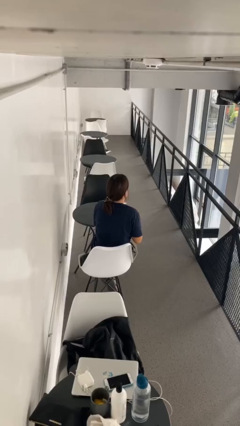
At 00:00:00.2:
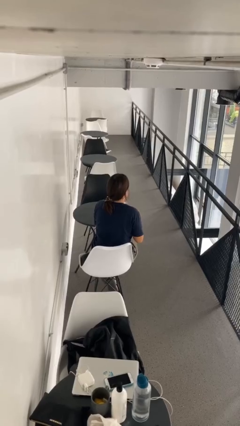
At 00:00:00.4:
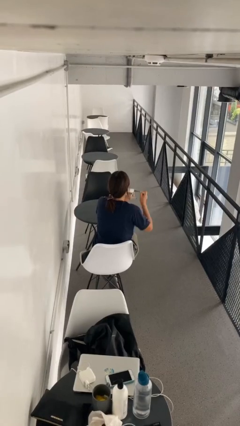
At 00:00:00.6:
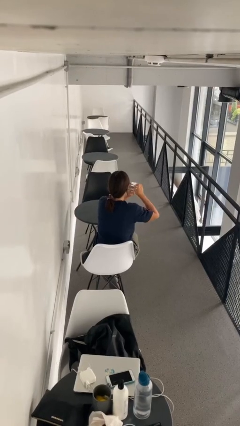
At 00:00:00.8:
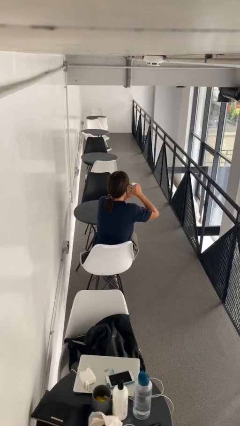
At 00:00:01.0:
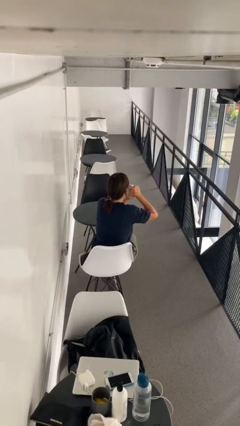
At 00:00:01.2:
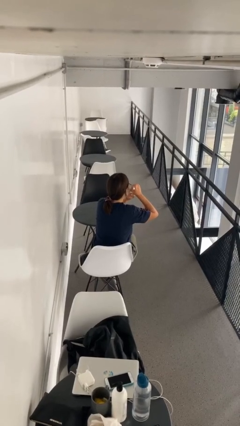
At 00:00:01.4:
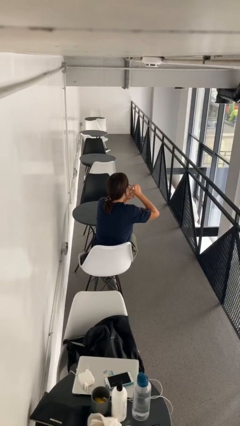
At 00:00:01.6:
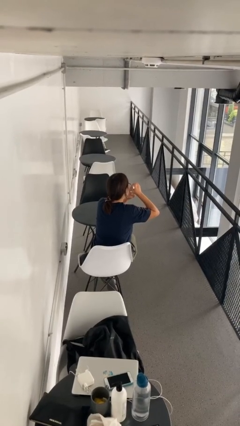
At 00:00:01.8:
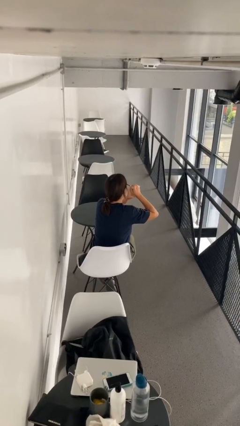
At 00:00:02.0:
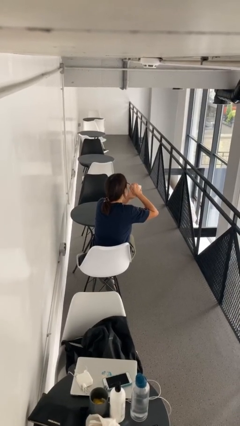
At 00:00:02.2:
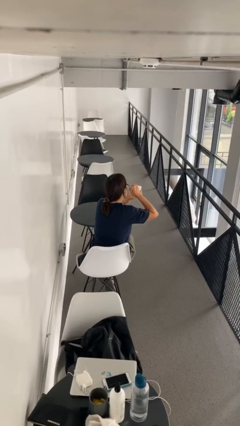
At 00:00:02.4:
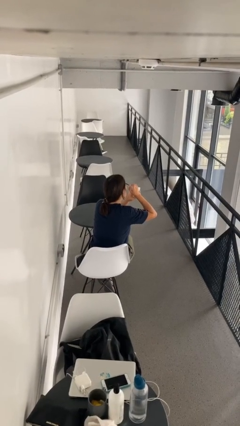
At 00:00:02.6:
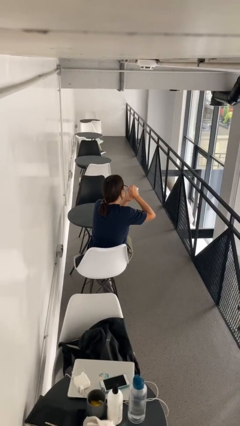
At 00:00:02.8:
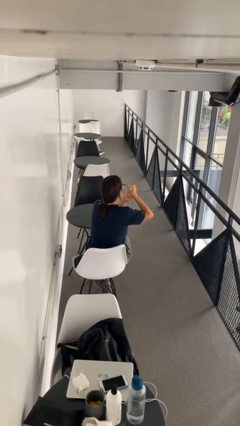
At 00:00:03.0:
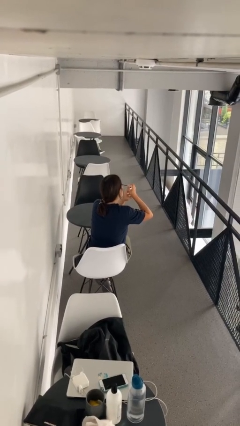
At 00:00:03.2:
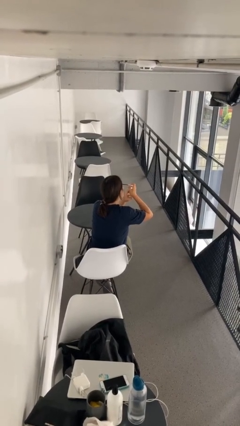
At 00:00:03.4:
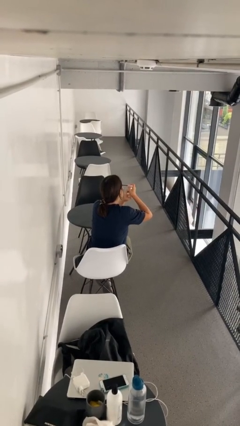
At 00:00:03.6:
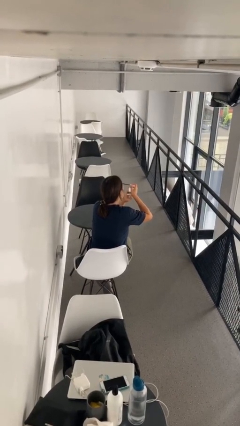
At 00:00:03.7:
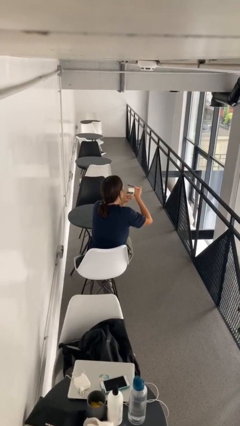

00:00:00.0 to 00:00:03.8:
person applies eye makeup

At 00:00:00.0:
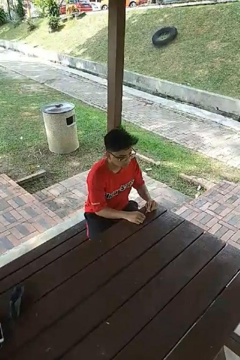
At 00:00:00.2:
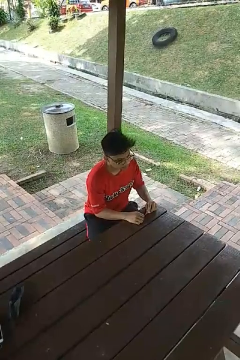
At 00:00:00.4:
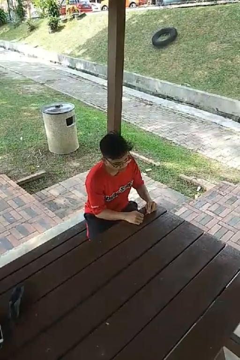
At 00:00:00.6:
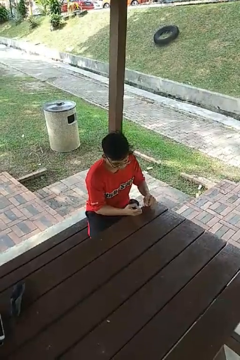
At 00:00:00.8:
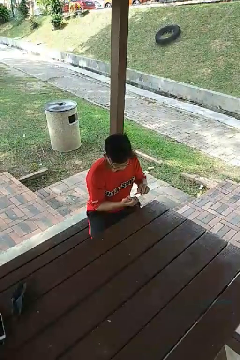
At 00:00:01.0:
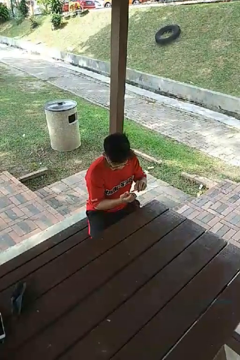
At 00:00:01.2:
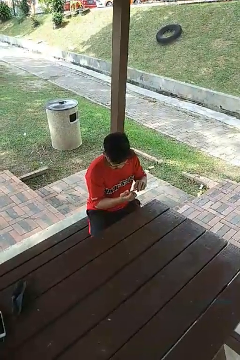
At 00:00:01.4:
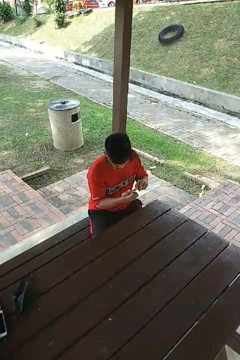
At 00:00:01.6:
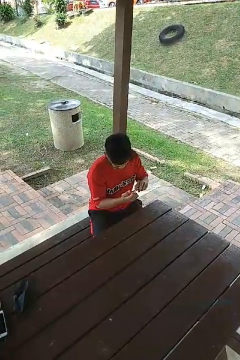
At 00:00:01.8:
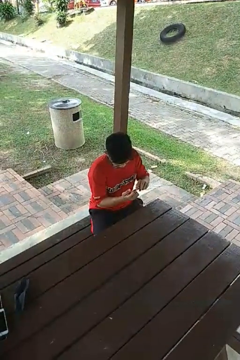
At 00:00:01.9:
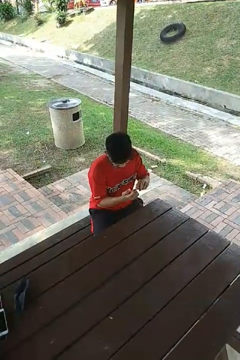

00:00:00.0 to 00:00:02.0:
person paints fingernails

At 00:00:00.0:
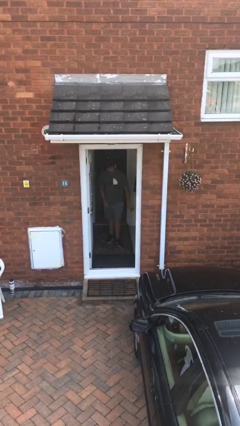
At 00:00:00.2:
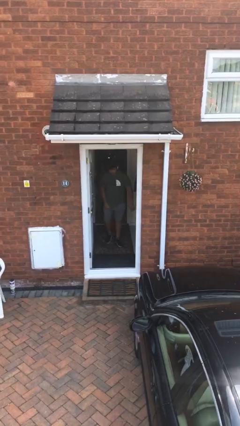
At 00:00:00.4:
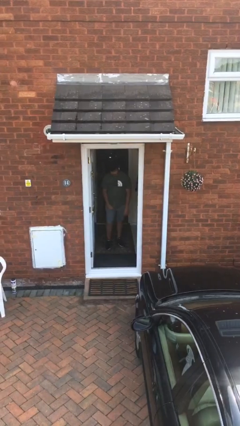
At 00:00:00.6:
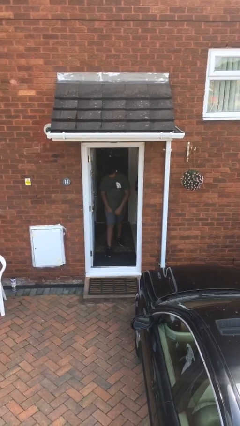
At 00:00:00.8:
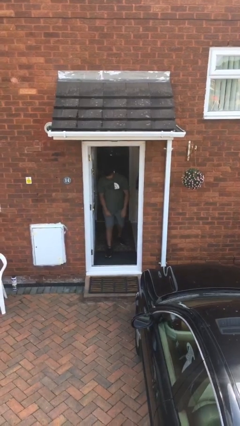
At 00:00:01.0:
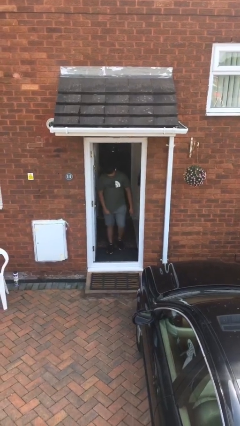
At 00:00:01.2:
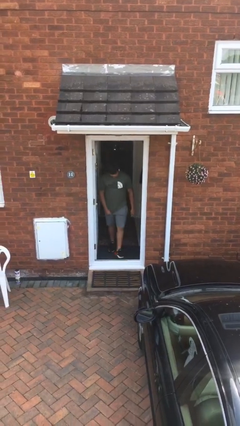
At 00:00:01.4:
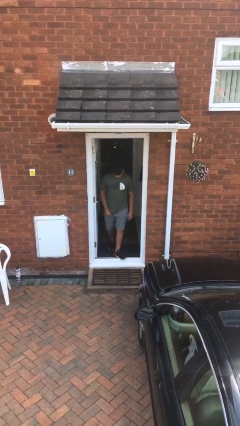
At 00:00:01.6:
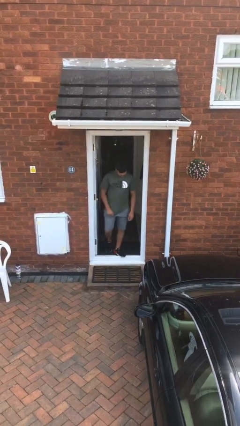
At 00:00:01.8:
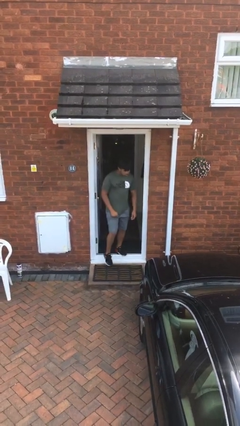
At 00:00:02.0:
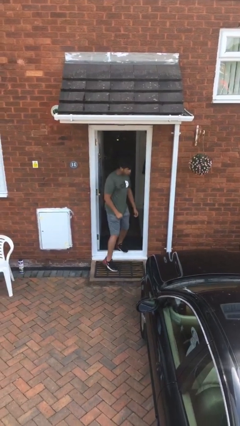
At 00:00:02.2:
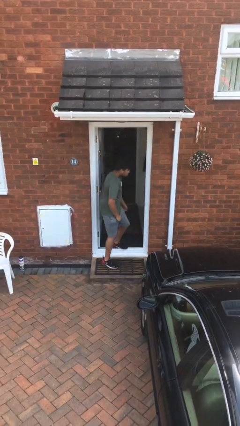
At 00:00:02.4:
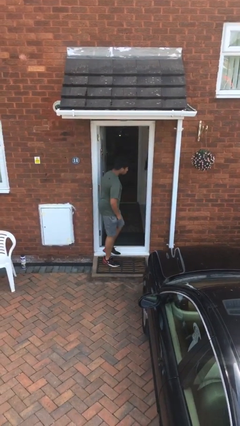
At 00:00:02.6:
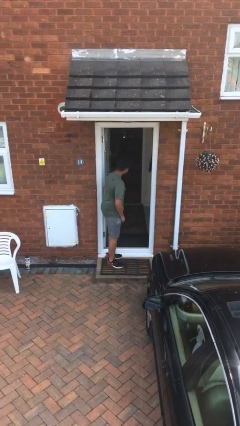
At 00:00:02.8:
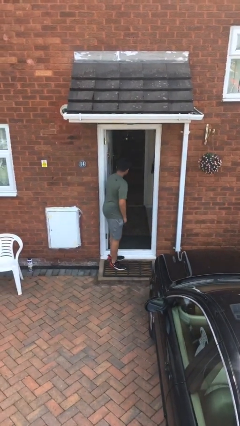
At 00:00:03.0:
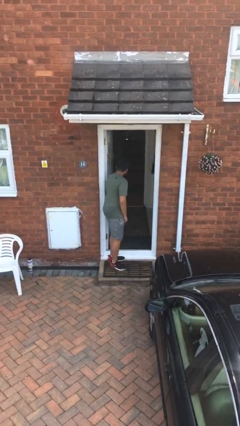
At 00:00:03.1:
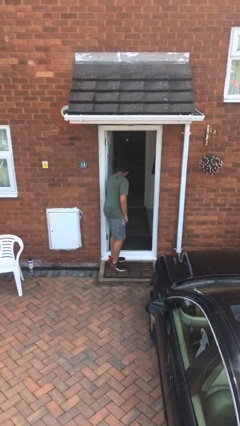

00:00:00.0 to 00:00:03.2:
person enters scene through structure

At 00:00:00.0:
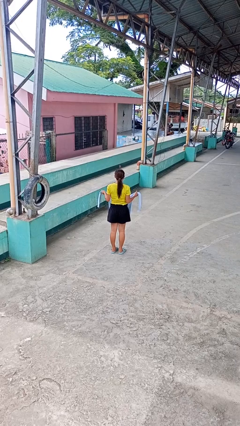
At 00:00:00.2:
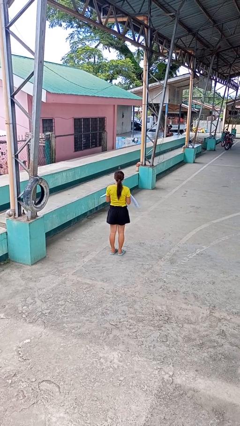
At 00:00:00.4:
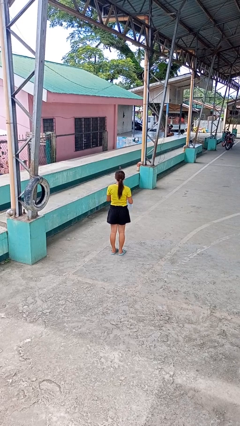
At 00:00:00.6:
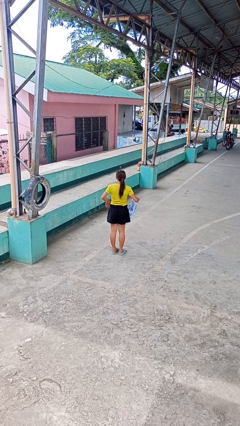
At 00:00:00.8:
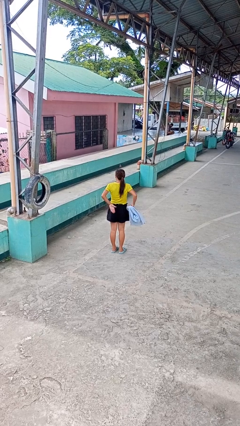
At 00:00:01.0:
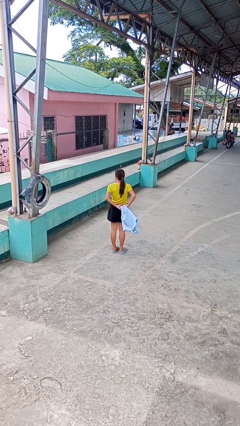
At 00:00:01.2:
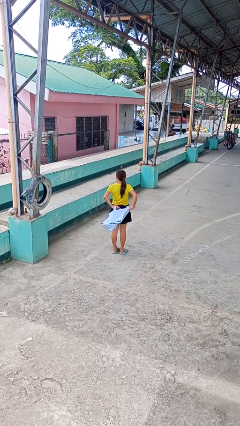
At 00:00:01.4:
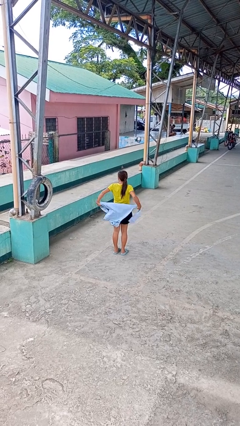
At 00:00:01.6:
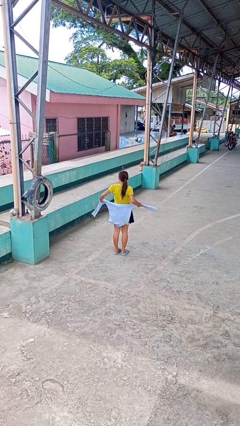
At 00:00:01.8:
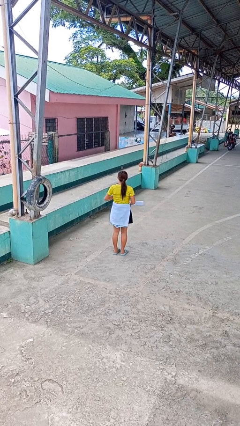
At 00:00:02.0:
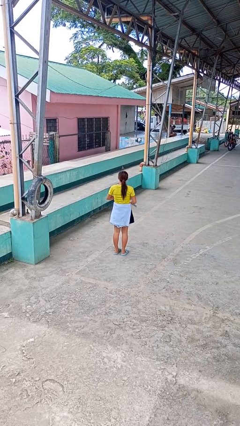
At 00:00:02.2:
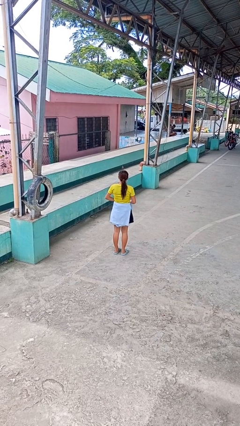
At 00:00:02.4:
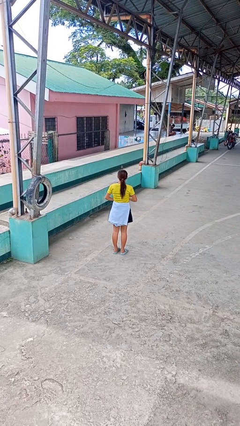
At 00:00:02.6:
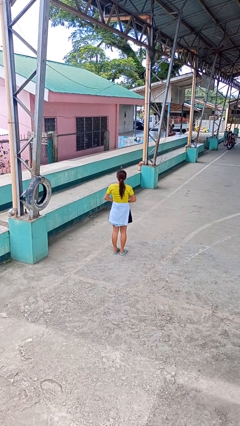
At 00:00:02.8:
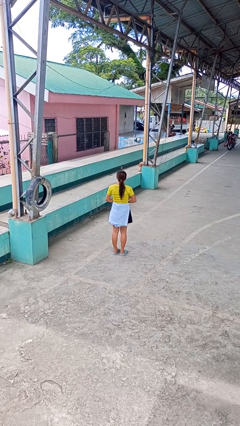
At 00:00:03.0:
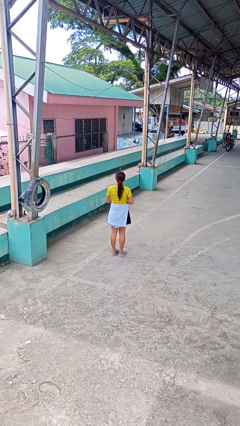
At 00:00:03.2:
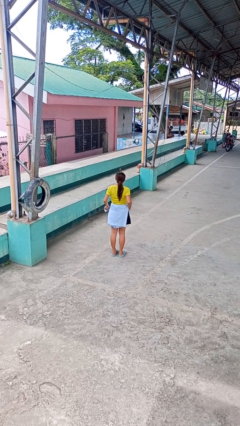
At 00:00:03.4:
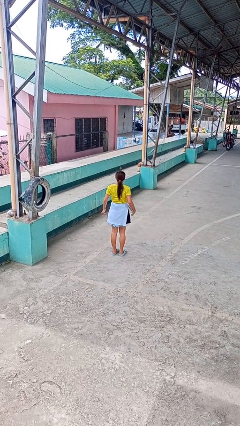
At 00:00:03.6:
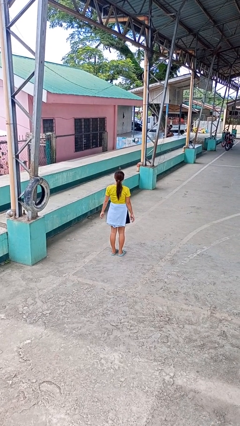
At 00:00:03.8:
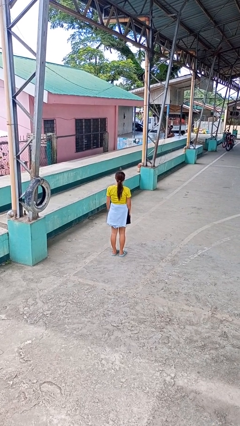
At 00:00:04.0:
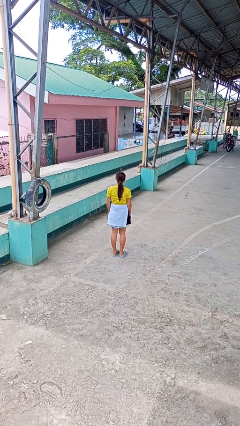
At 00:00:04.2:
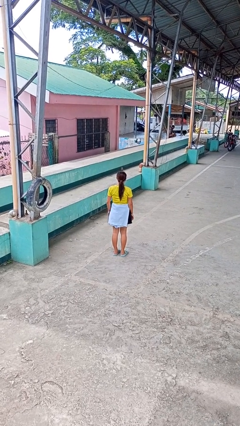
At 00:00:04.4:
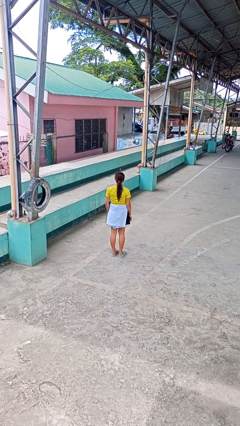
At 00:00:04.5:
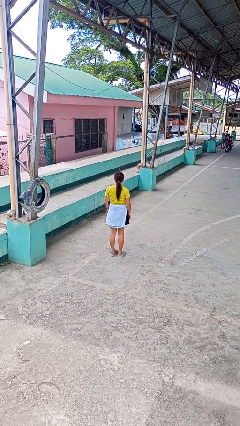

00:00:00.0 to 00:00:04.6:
person ties jacket around waist

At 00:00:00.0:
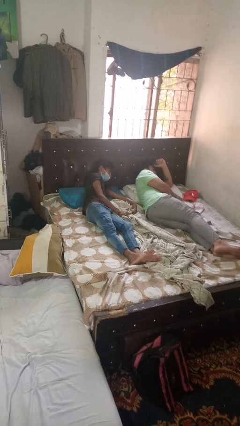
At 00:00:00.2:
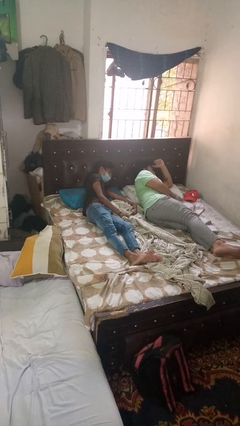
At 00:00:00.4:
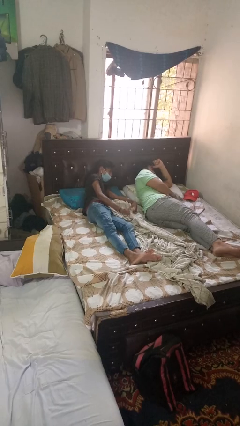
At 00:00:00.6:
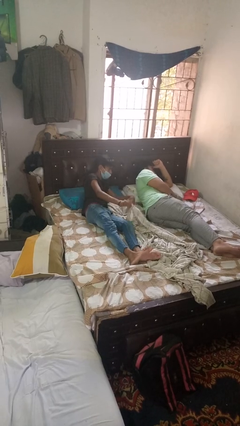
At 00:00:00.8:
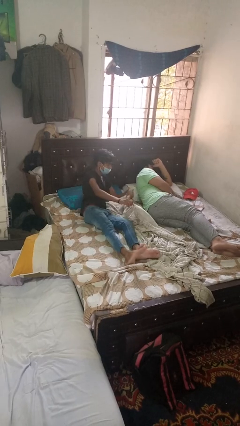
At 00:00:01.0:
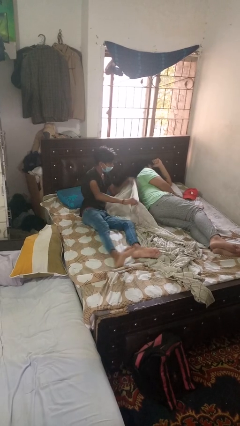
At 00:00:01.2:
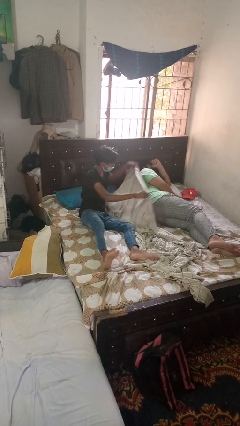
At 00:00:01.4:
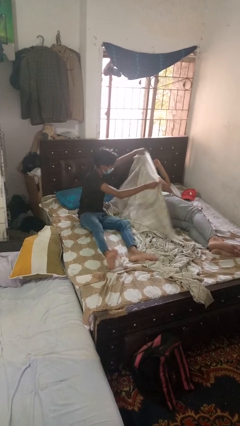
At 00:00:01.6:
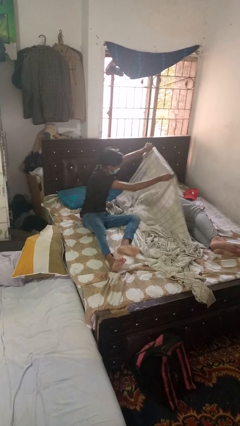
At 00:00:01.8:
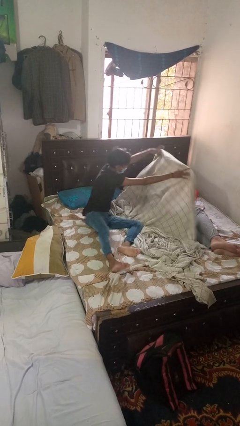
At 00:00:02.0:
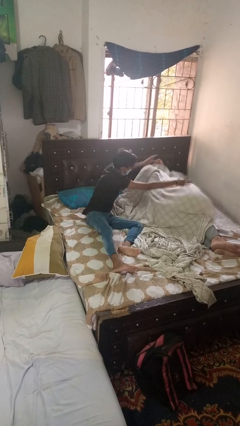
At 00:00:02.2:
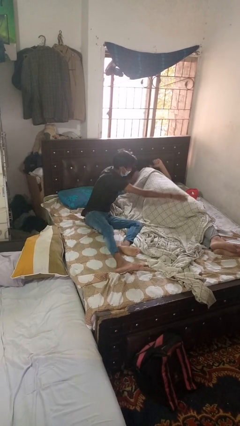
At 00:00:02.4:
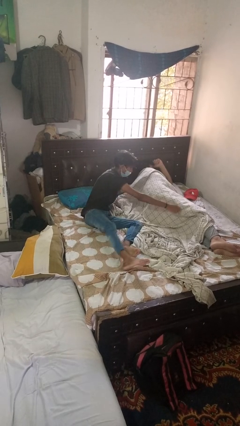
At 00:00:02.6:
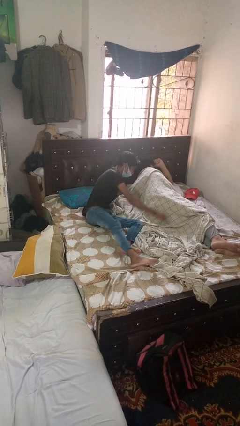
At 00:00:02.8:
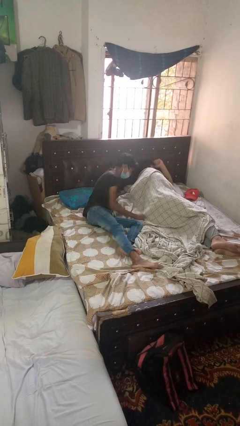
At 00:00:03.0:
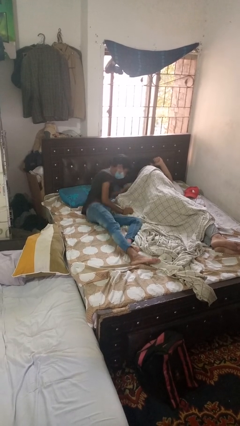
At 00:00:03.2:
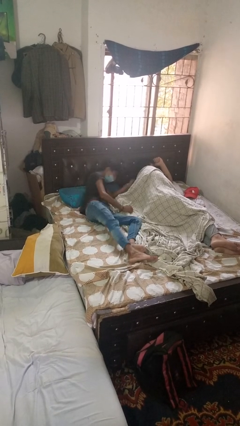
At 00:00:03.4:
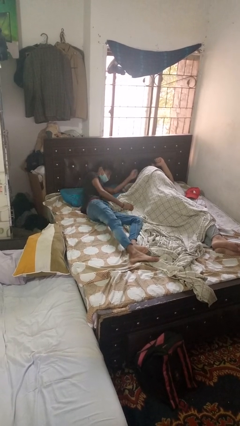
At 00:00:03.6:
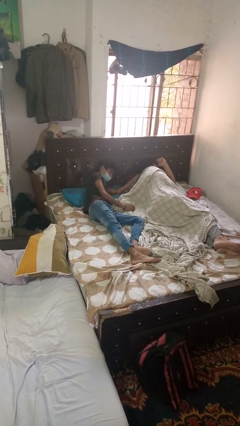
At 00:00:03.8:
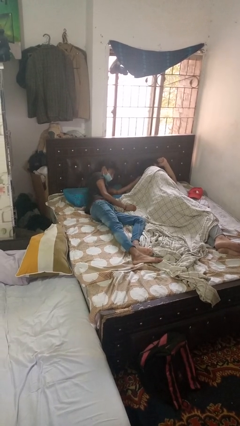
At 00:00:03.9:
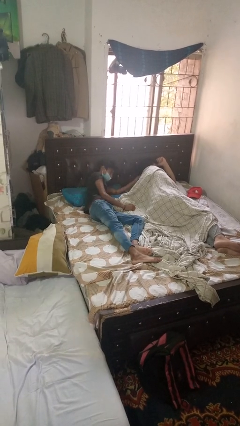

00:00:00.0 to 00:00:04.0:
person covers friend with blanket

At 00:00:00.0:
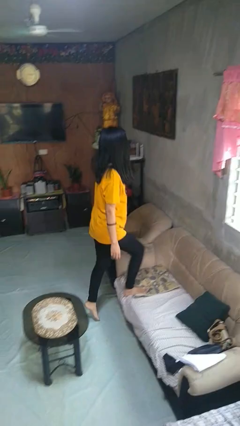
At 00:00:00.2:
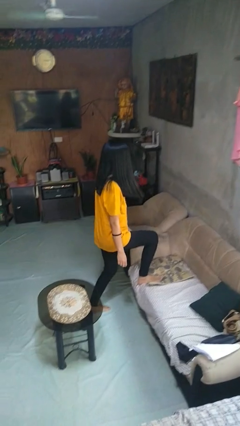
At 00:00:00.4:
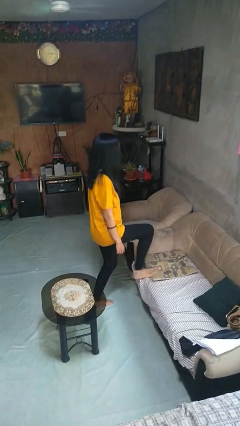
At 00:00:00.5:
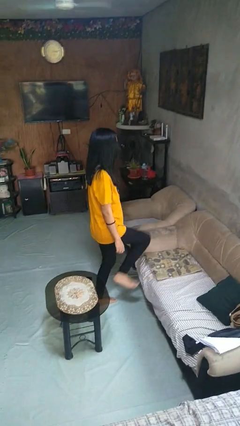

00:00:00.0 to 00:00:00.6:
person climbs off couch
